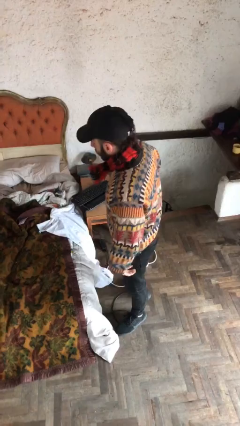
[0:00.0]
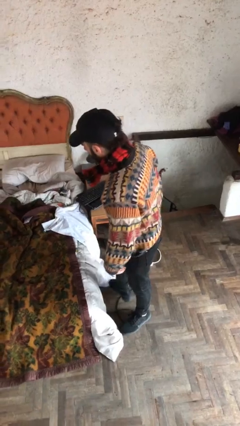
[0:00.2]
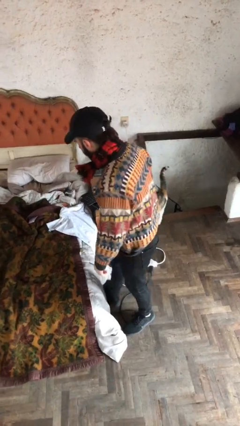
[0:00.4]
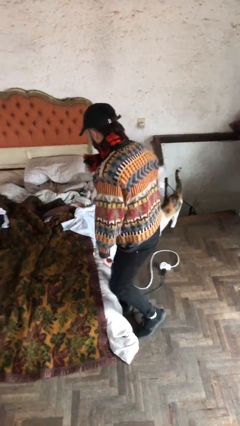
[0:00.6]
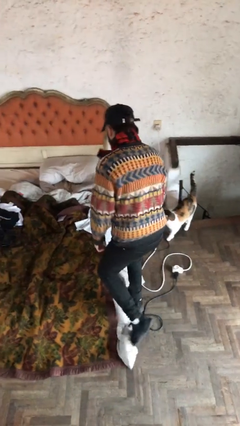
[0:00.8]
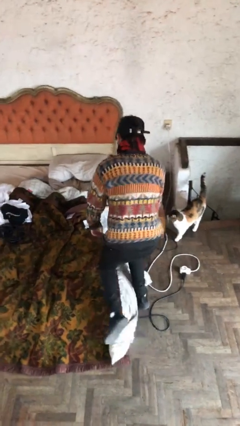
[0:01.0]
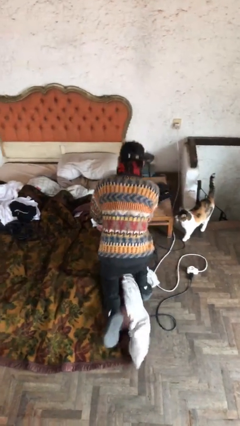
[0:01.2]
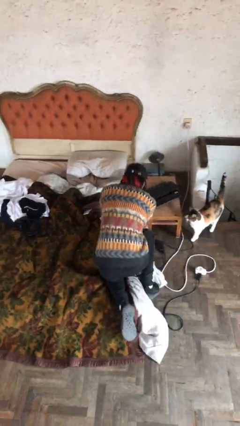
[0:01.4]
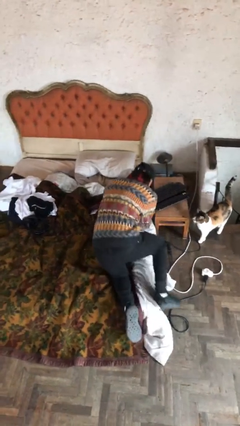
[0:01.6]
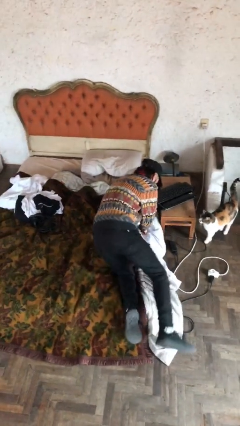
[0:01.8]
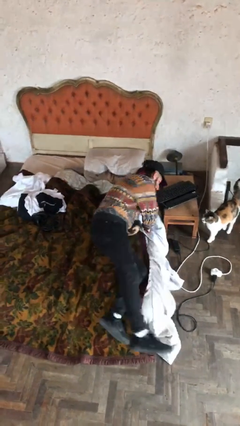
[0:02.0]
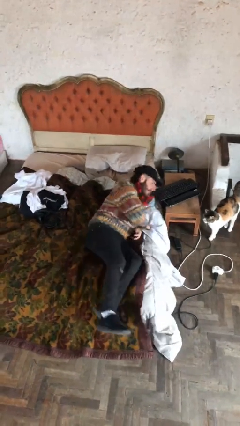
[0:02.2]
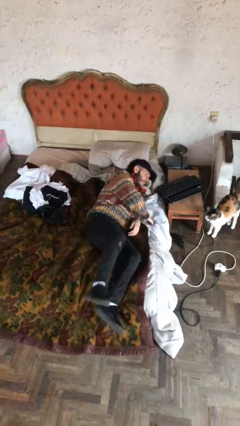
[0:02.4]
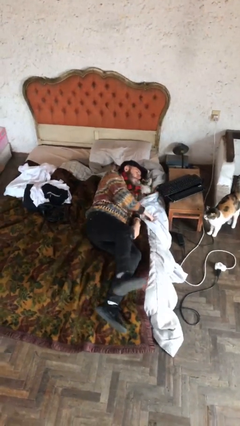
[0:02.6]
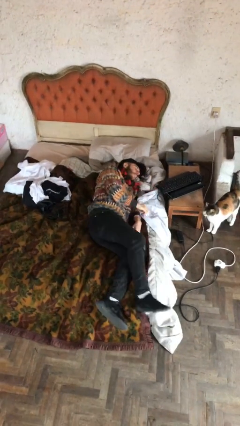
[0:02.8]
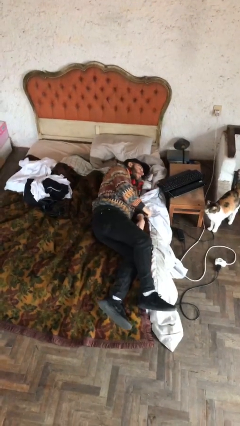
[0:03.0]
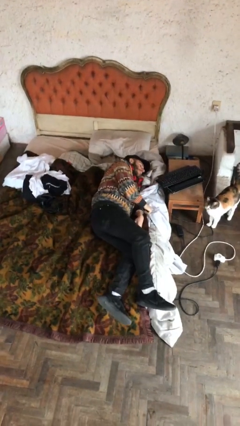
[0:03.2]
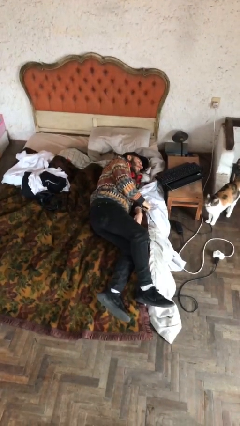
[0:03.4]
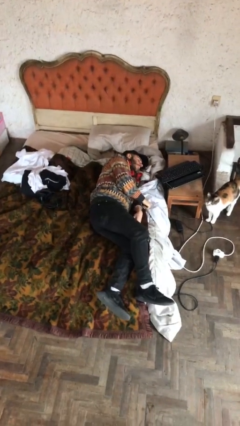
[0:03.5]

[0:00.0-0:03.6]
person lies down on bed

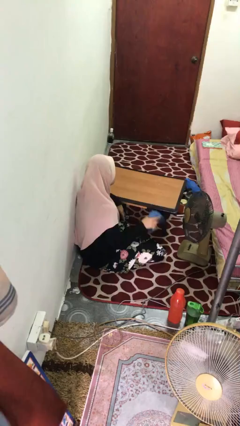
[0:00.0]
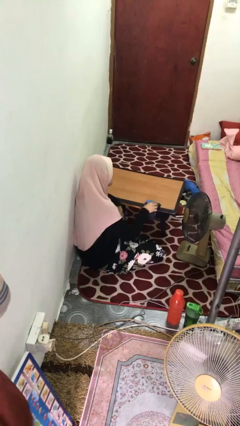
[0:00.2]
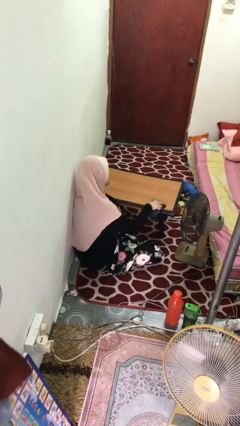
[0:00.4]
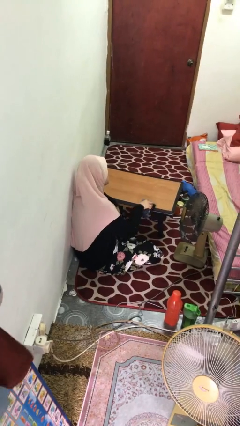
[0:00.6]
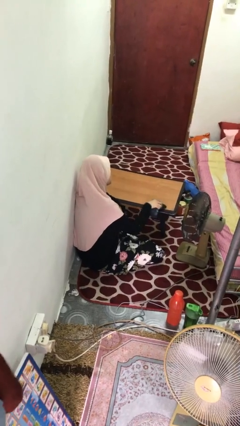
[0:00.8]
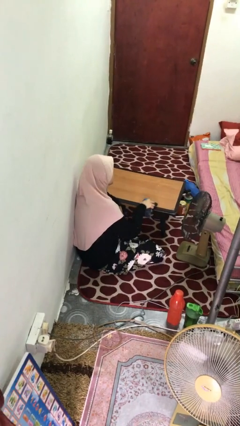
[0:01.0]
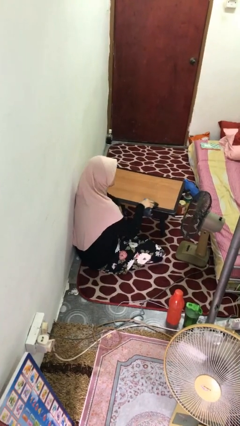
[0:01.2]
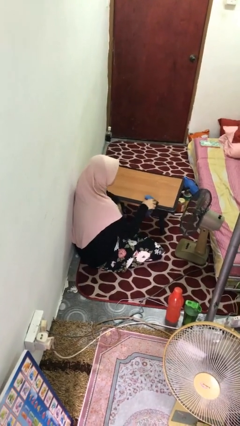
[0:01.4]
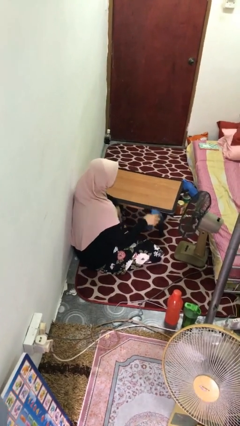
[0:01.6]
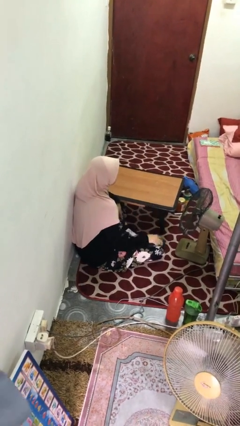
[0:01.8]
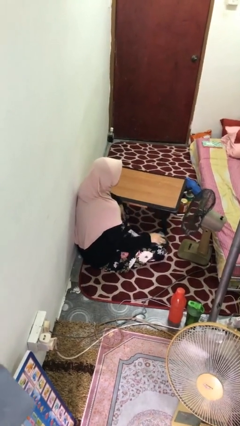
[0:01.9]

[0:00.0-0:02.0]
person cleans table with rag

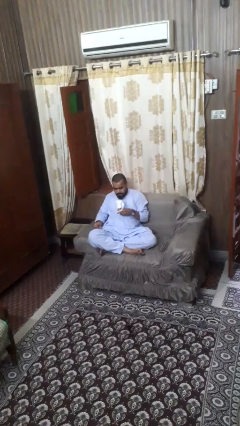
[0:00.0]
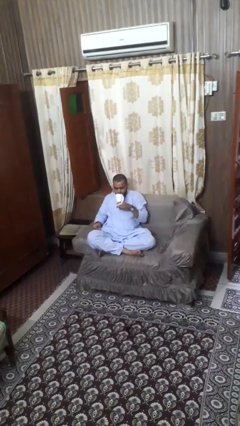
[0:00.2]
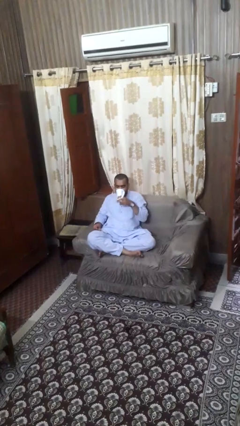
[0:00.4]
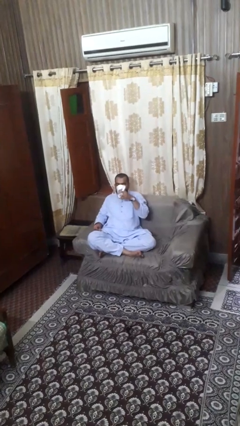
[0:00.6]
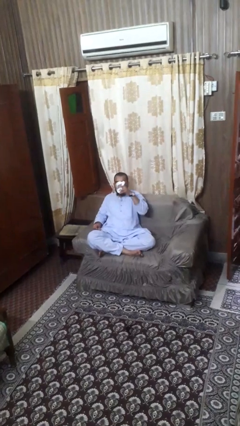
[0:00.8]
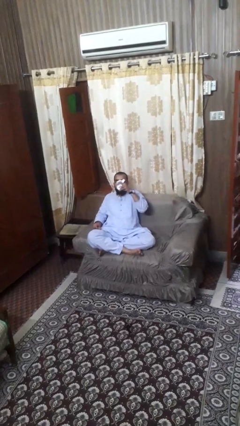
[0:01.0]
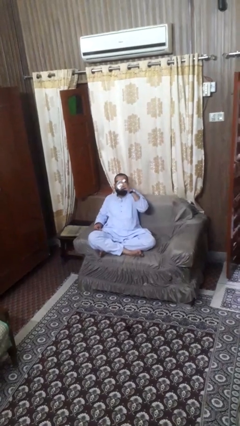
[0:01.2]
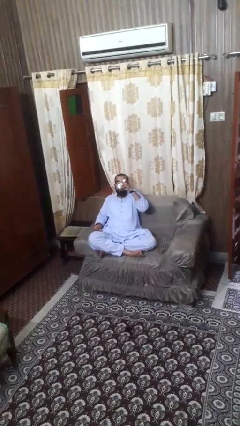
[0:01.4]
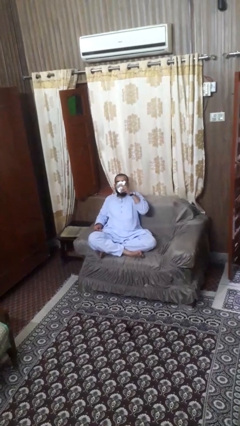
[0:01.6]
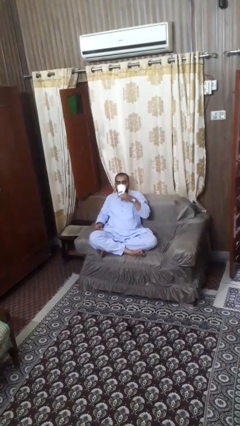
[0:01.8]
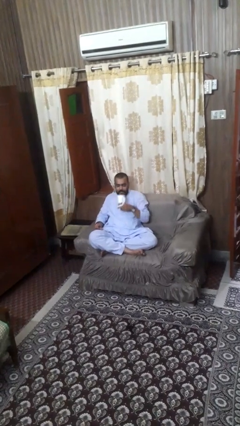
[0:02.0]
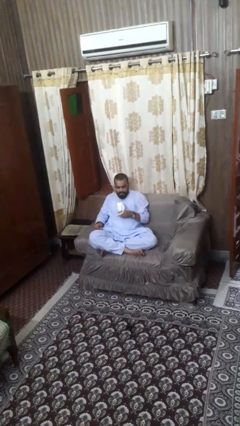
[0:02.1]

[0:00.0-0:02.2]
person drinks from mug

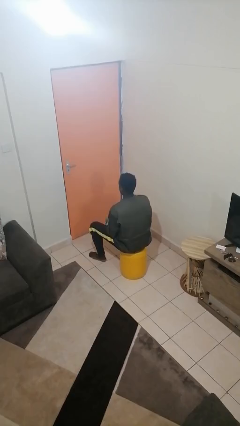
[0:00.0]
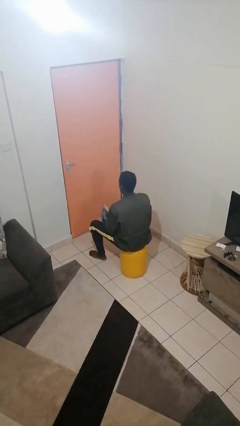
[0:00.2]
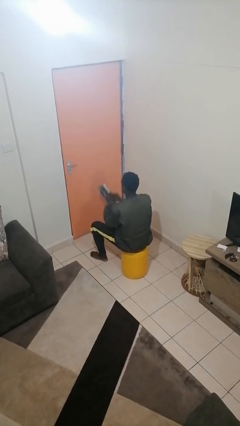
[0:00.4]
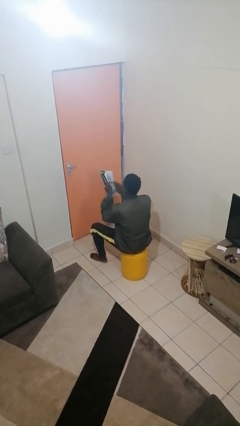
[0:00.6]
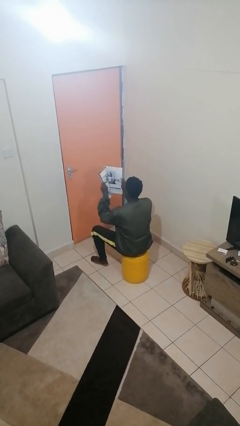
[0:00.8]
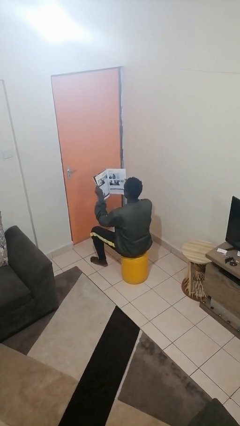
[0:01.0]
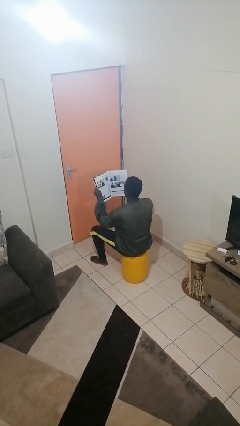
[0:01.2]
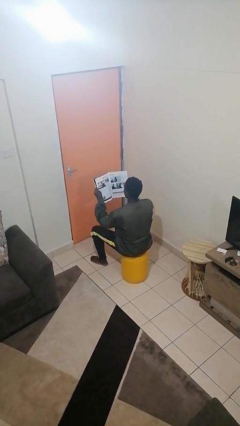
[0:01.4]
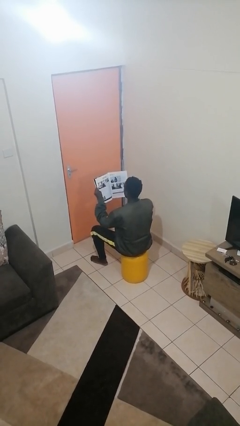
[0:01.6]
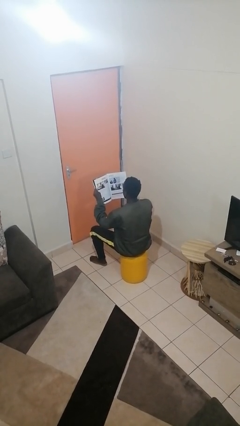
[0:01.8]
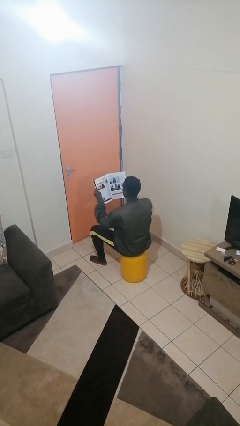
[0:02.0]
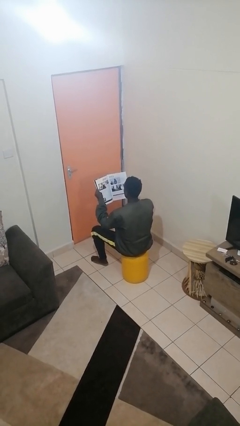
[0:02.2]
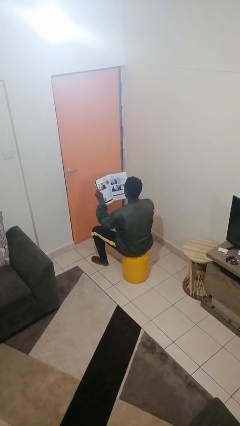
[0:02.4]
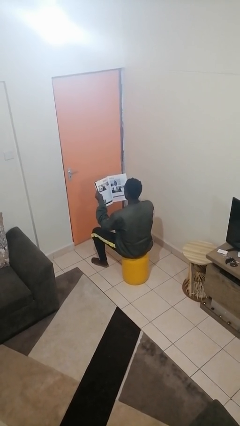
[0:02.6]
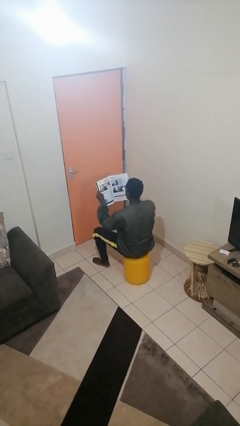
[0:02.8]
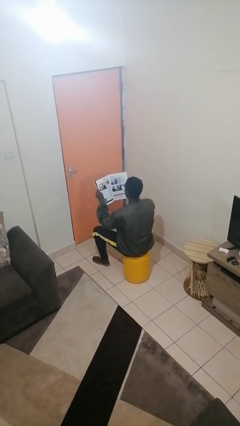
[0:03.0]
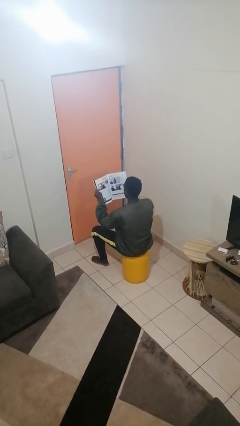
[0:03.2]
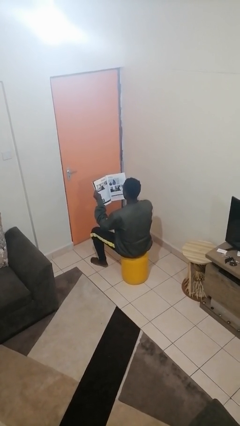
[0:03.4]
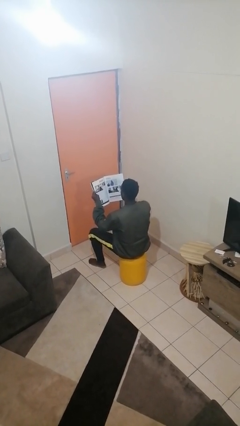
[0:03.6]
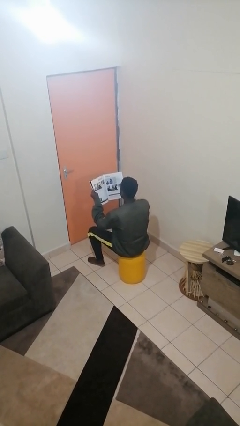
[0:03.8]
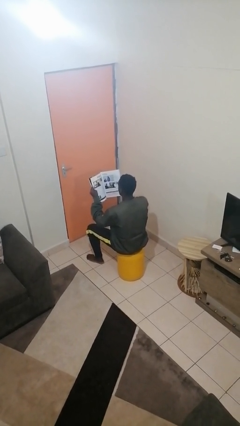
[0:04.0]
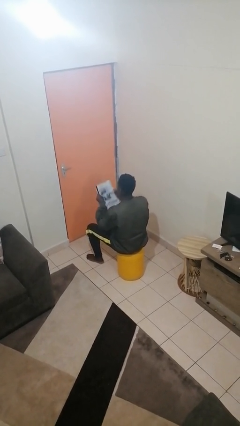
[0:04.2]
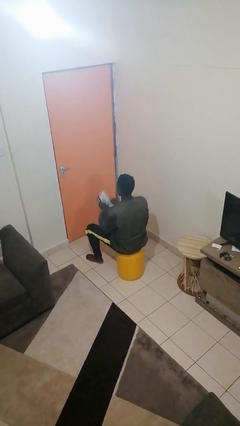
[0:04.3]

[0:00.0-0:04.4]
person reads magazine

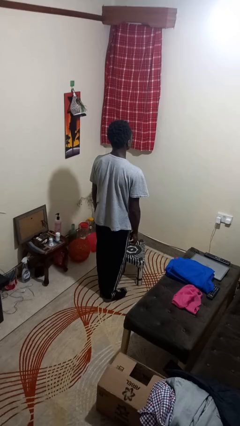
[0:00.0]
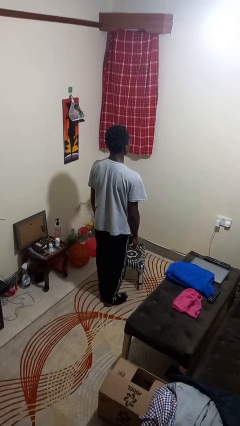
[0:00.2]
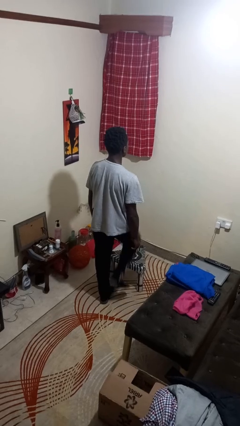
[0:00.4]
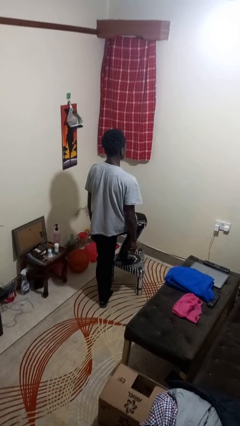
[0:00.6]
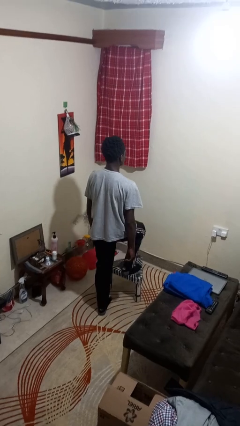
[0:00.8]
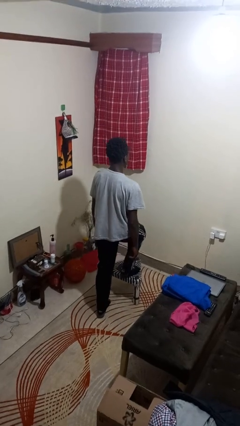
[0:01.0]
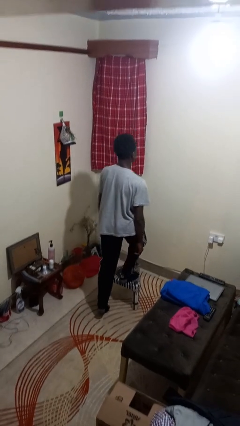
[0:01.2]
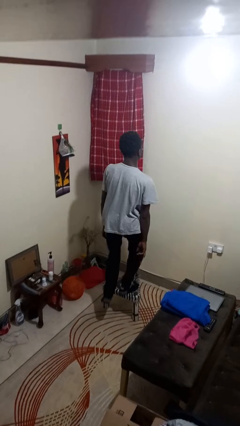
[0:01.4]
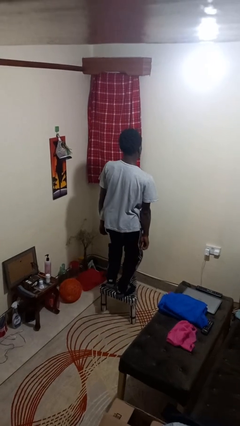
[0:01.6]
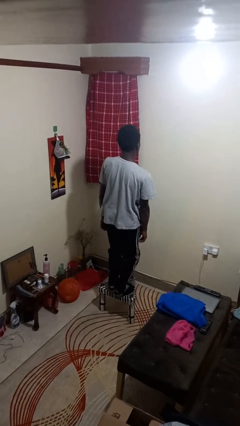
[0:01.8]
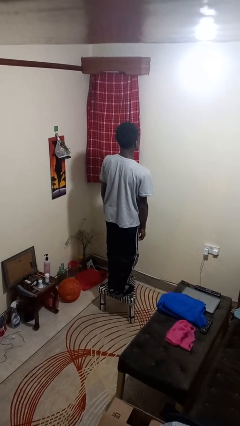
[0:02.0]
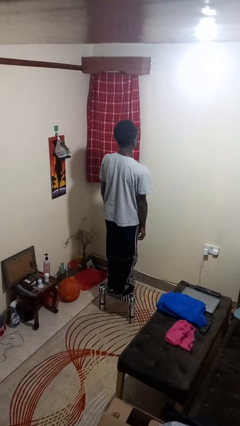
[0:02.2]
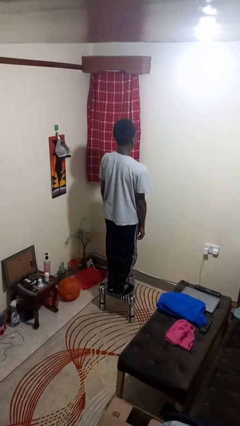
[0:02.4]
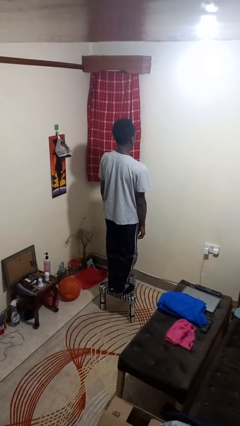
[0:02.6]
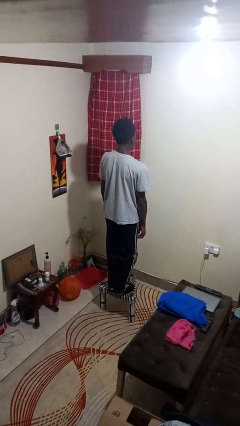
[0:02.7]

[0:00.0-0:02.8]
person climbs on chair

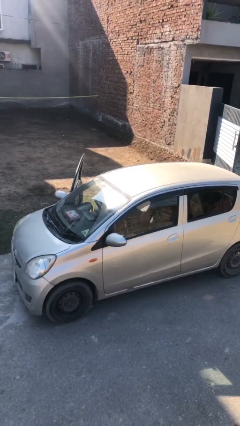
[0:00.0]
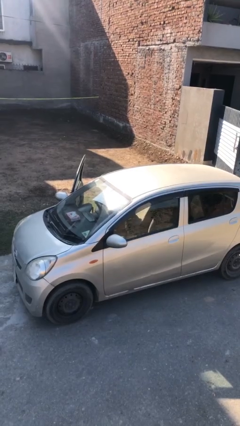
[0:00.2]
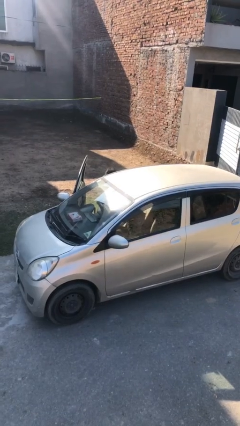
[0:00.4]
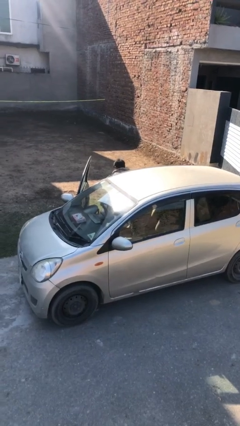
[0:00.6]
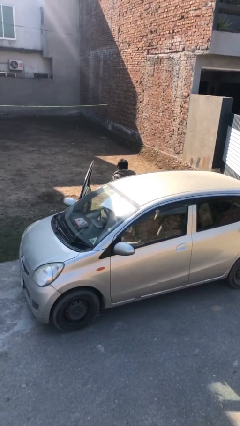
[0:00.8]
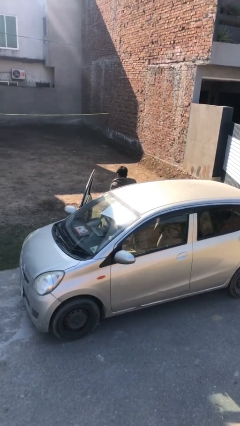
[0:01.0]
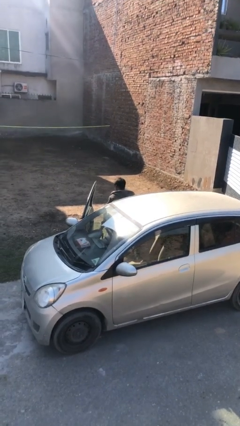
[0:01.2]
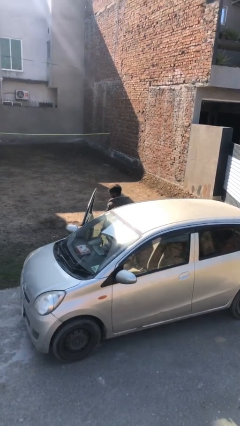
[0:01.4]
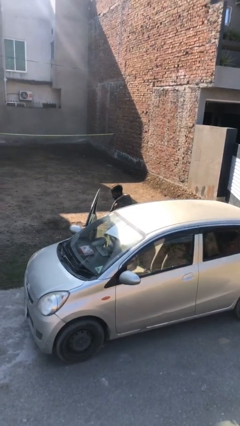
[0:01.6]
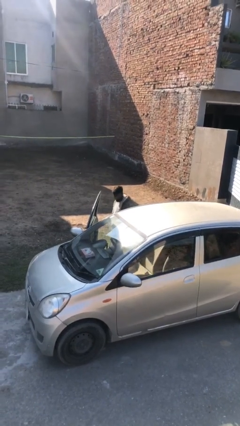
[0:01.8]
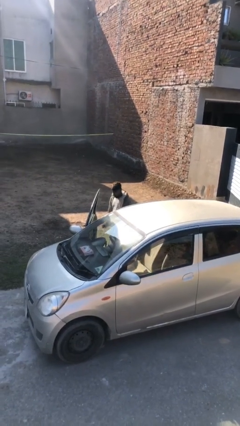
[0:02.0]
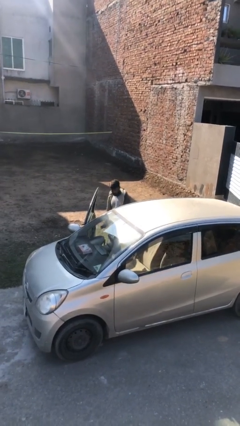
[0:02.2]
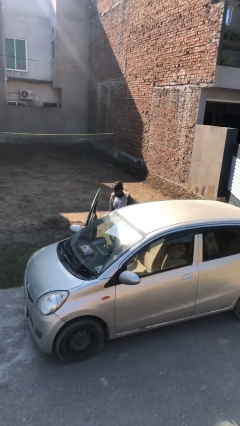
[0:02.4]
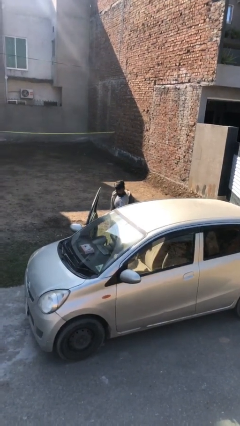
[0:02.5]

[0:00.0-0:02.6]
person exits car
